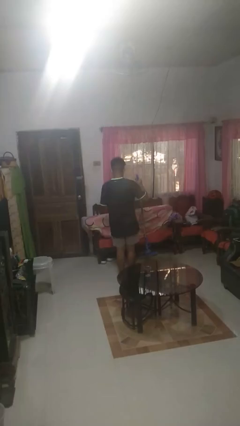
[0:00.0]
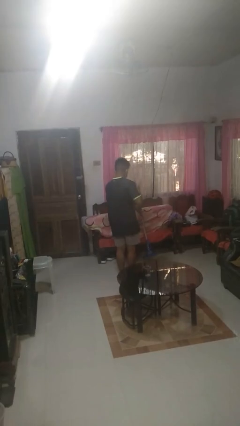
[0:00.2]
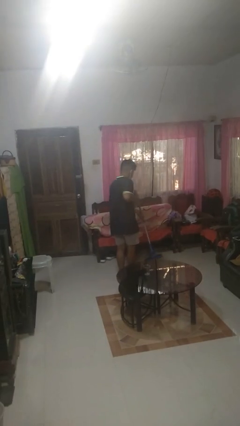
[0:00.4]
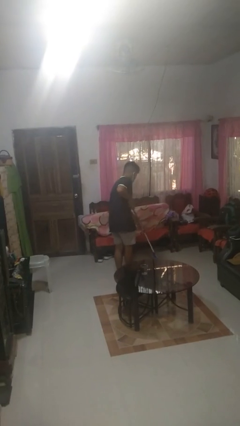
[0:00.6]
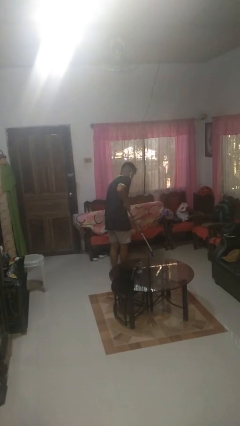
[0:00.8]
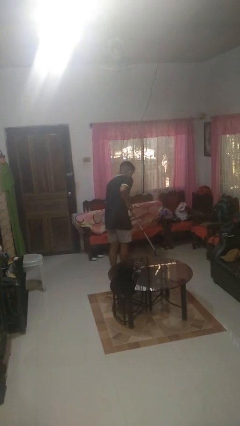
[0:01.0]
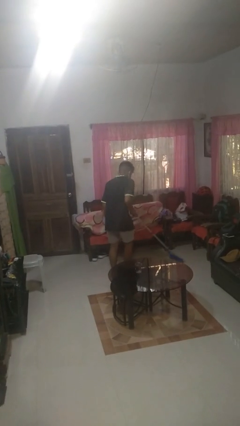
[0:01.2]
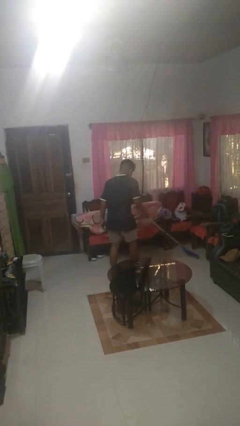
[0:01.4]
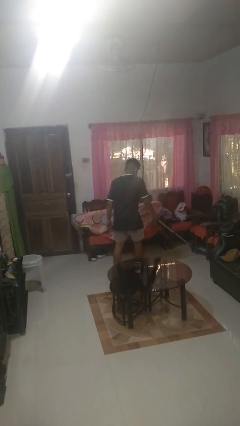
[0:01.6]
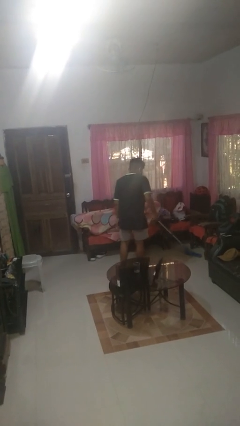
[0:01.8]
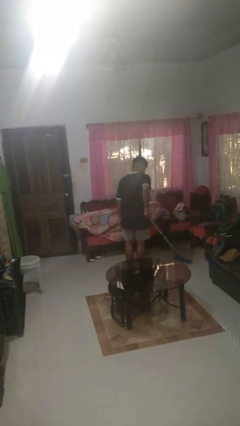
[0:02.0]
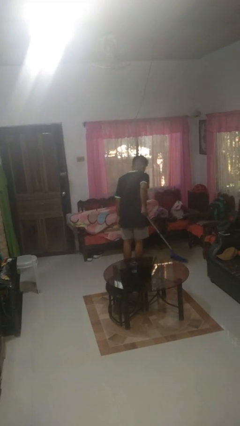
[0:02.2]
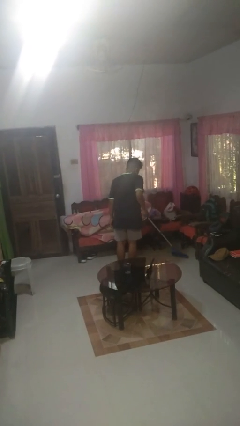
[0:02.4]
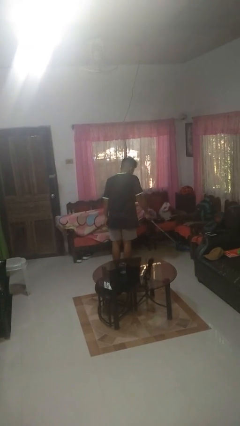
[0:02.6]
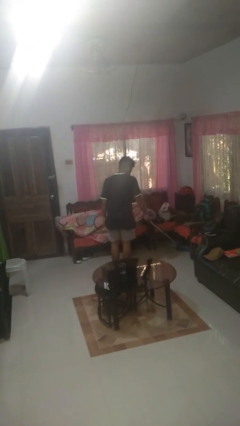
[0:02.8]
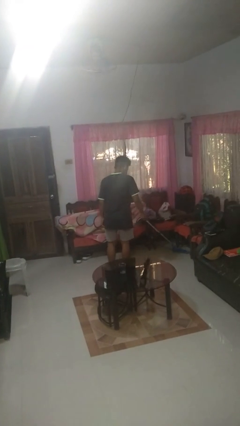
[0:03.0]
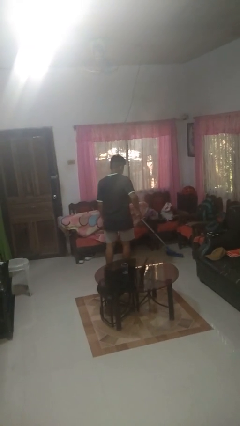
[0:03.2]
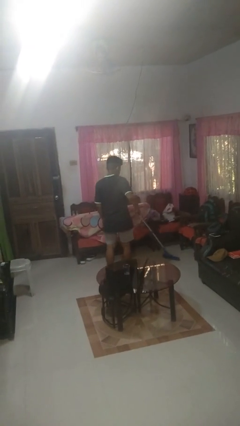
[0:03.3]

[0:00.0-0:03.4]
person mops

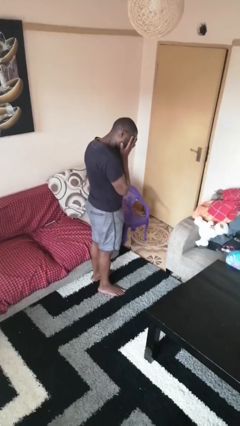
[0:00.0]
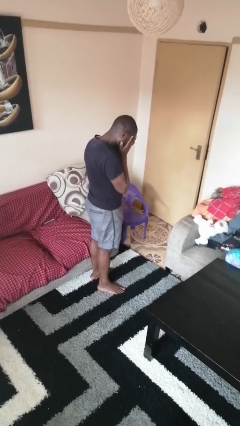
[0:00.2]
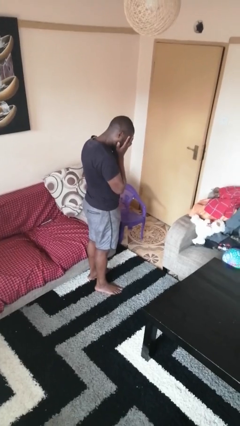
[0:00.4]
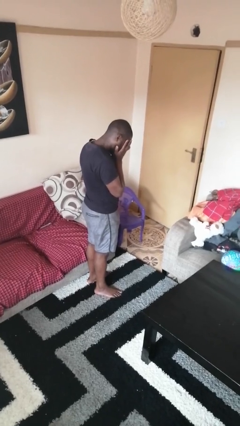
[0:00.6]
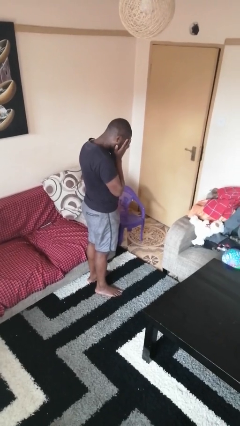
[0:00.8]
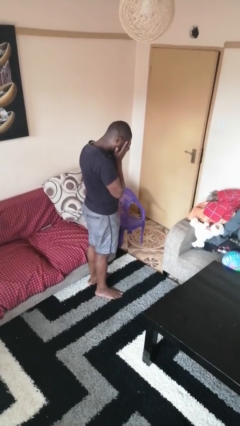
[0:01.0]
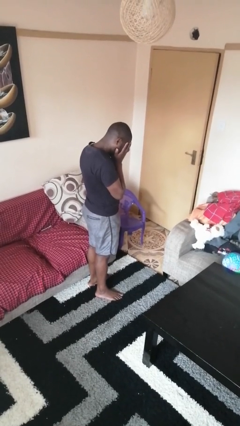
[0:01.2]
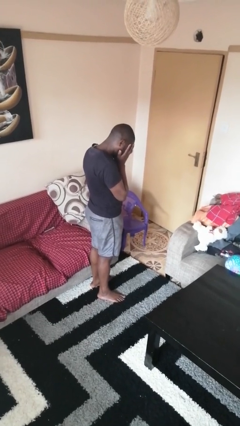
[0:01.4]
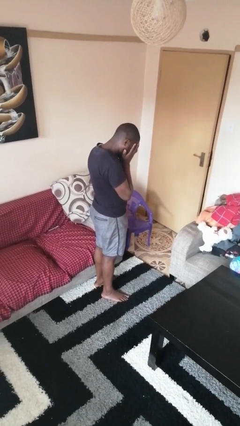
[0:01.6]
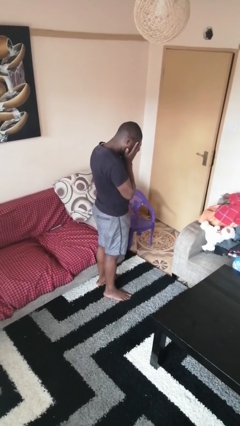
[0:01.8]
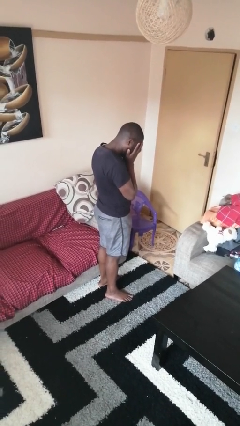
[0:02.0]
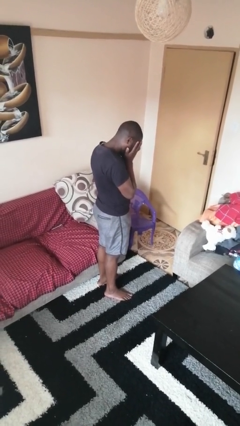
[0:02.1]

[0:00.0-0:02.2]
person covers face with hands

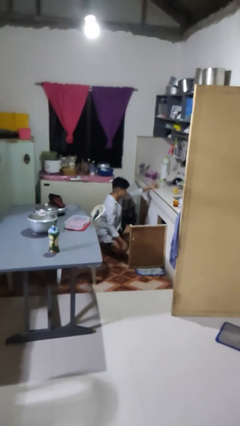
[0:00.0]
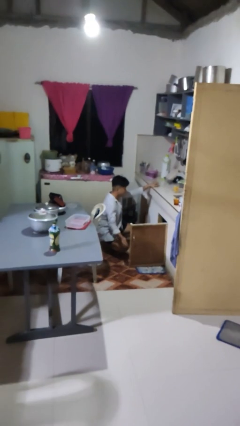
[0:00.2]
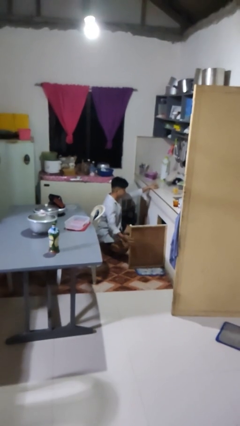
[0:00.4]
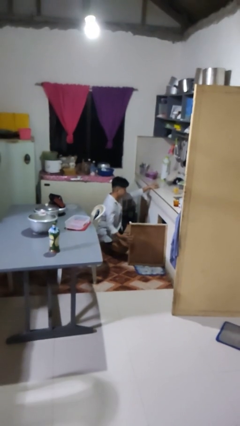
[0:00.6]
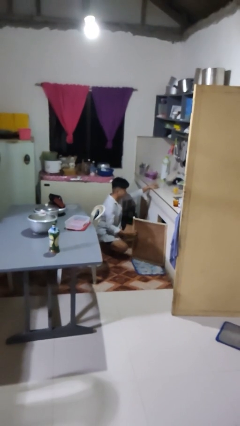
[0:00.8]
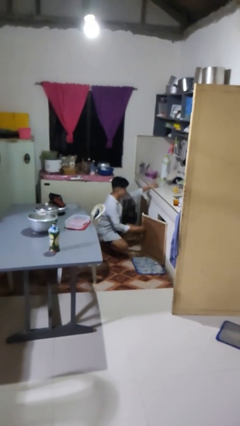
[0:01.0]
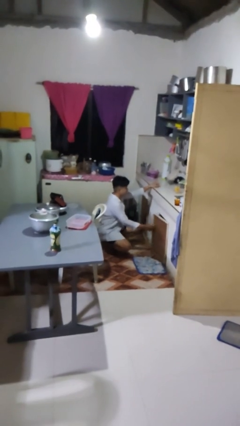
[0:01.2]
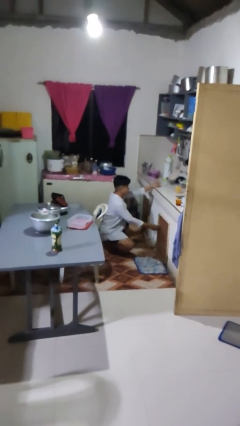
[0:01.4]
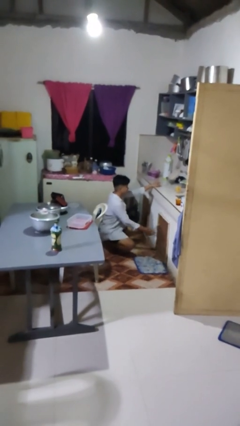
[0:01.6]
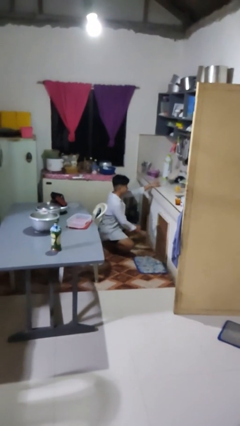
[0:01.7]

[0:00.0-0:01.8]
person closes cabinet

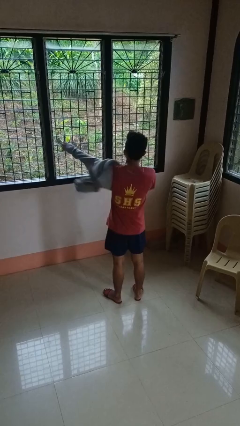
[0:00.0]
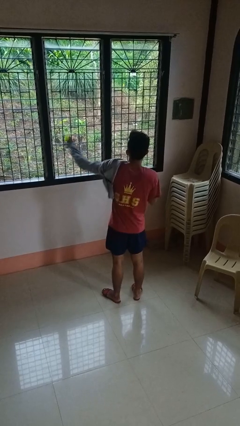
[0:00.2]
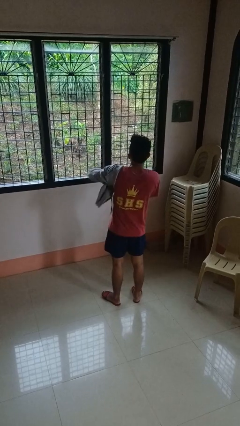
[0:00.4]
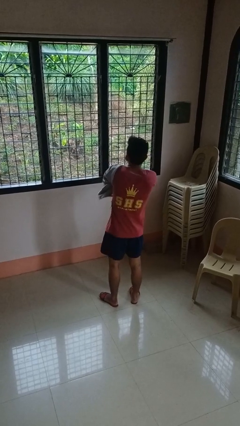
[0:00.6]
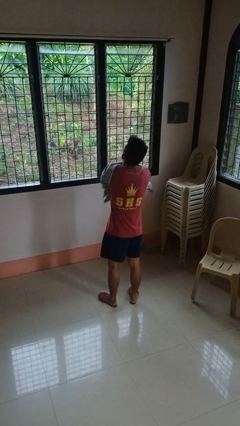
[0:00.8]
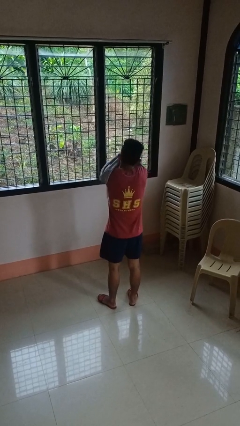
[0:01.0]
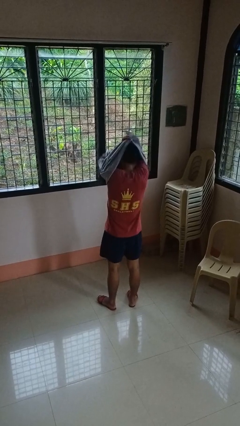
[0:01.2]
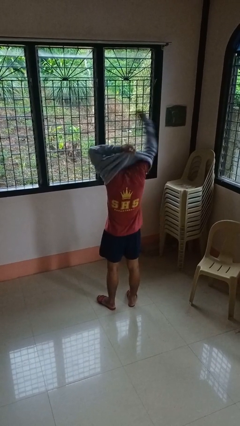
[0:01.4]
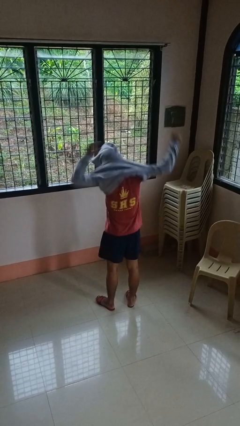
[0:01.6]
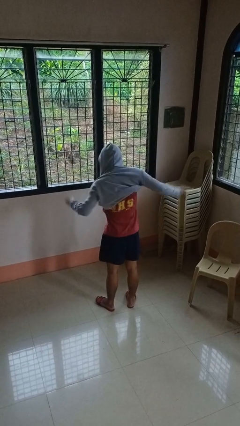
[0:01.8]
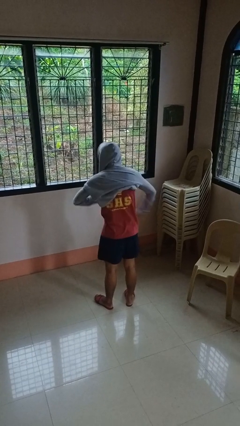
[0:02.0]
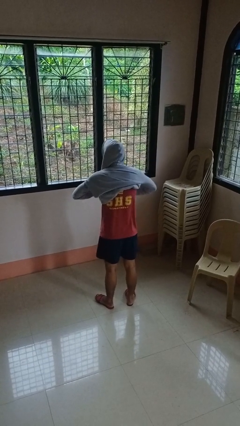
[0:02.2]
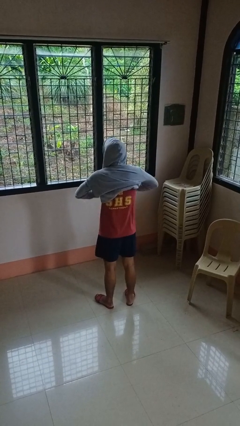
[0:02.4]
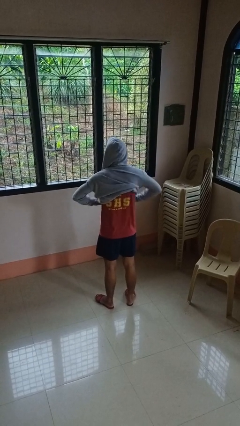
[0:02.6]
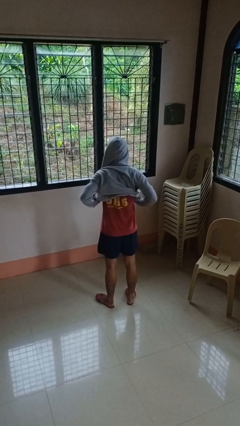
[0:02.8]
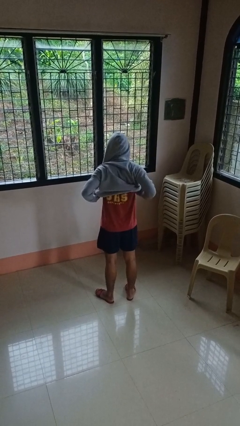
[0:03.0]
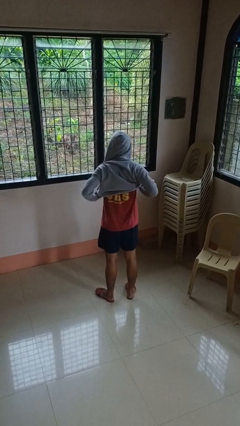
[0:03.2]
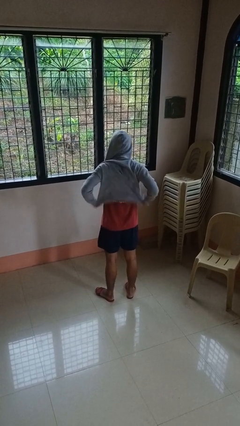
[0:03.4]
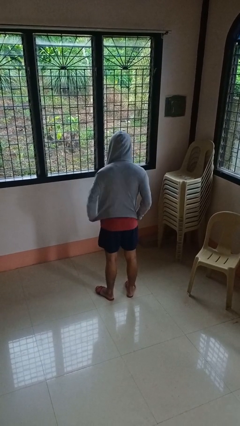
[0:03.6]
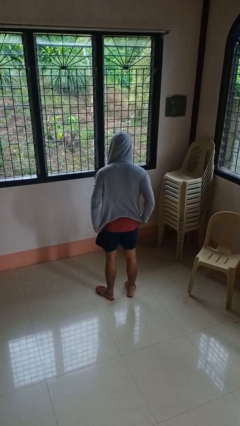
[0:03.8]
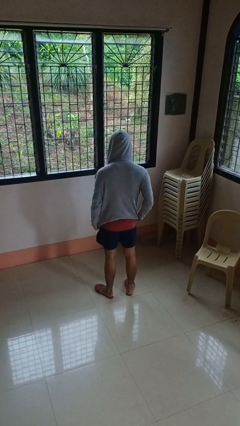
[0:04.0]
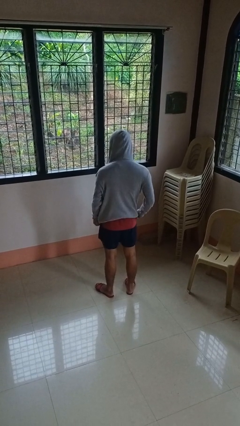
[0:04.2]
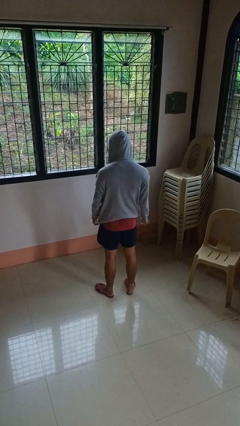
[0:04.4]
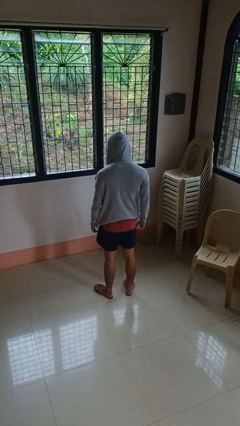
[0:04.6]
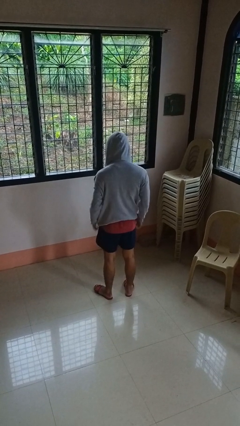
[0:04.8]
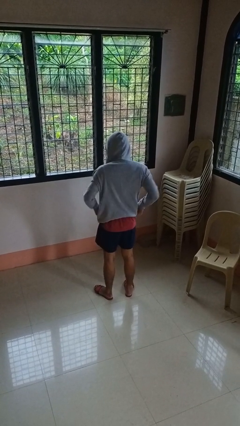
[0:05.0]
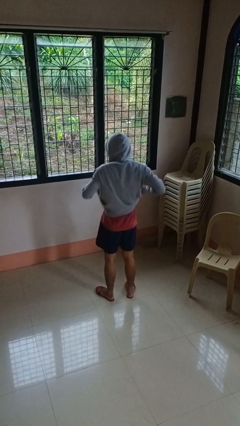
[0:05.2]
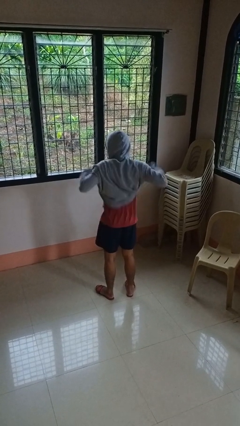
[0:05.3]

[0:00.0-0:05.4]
person puts on hoodie

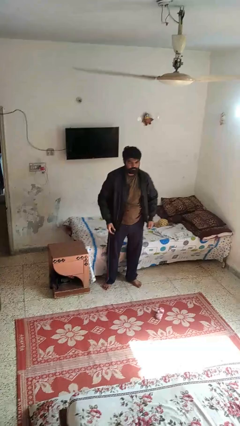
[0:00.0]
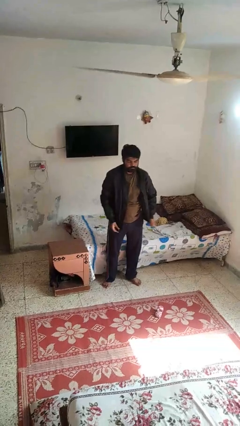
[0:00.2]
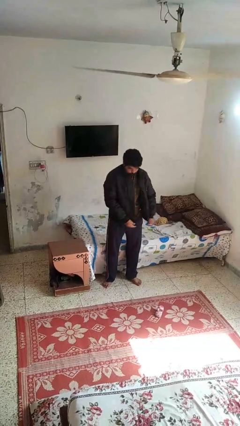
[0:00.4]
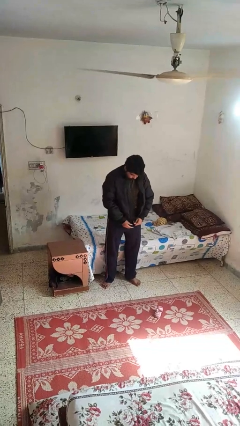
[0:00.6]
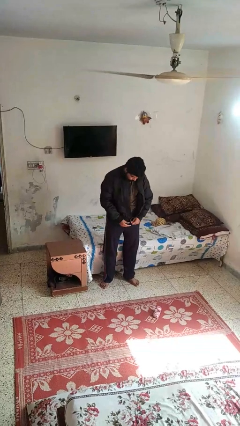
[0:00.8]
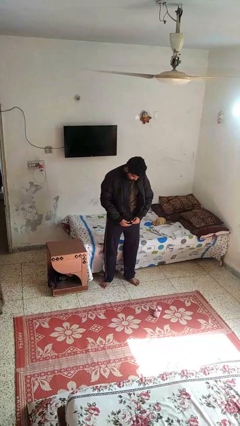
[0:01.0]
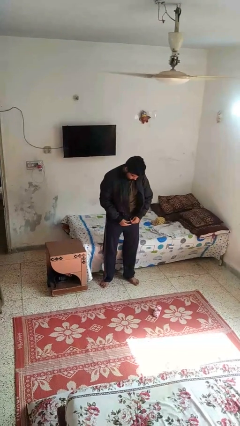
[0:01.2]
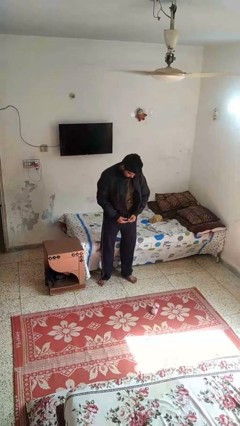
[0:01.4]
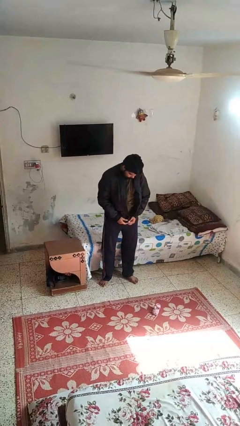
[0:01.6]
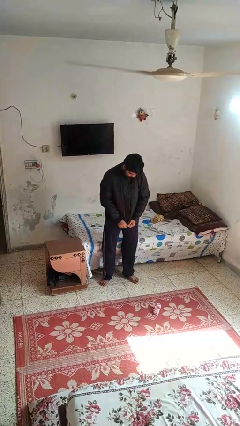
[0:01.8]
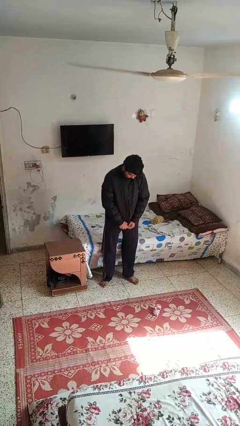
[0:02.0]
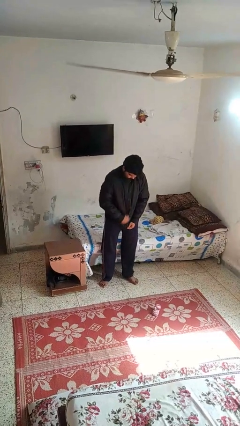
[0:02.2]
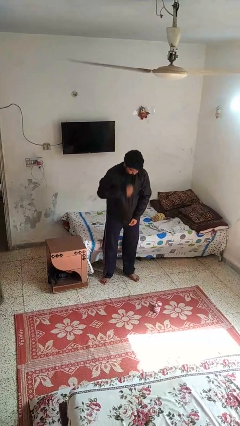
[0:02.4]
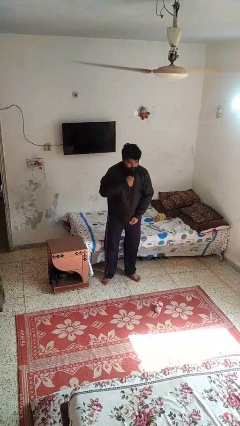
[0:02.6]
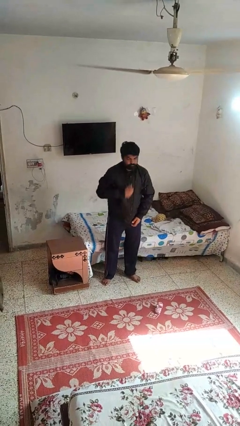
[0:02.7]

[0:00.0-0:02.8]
person zips up jacket

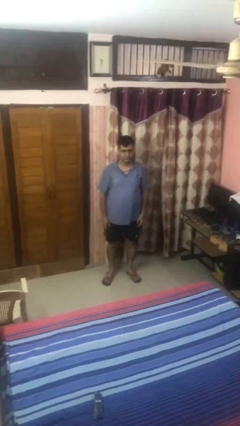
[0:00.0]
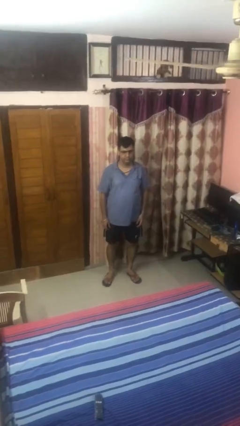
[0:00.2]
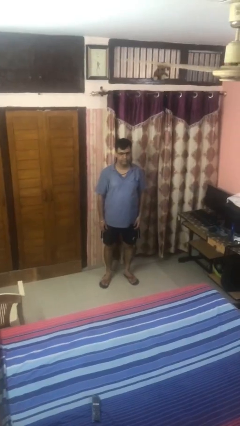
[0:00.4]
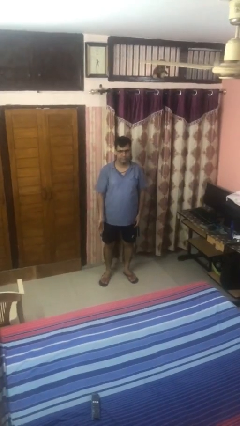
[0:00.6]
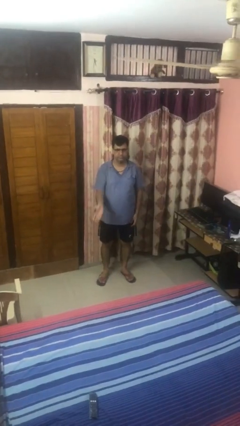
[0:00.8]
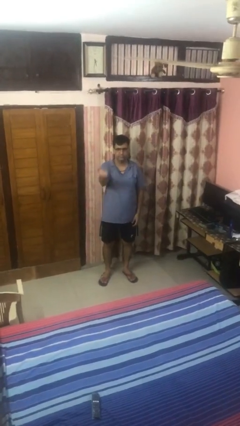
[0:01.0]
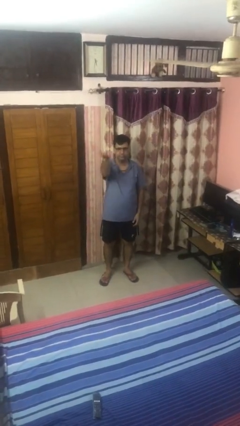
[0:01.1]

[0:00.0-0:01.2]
person gestures swipe up

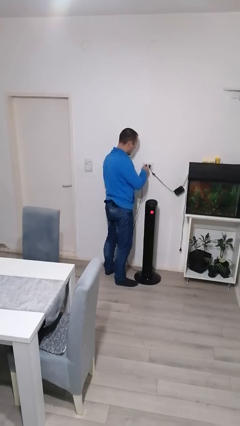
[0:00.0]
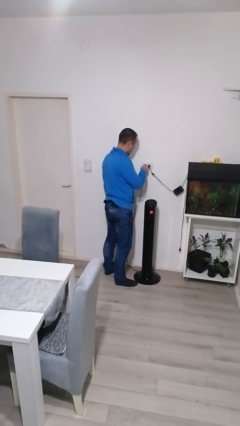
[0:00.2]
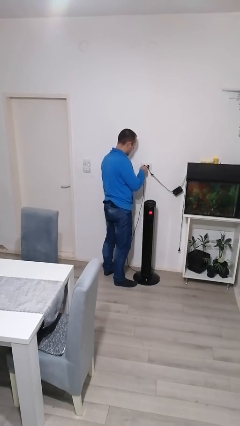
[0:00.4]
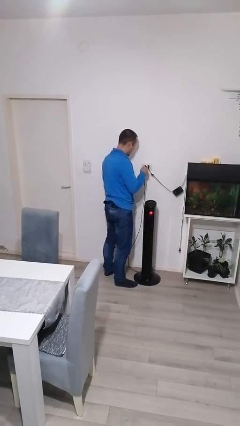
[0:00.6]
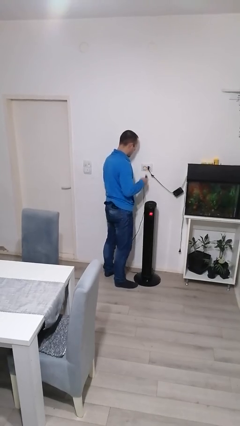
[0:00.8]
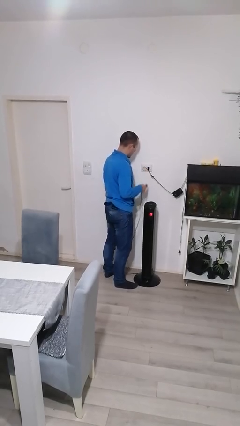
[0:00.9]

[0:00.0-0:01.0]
person unplugs from electrical socket
